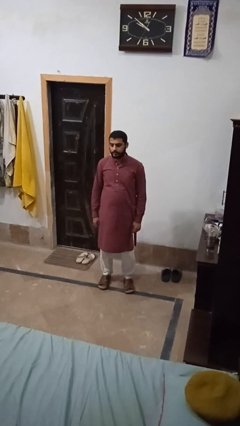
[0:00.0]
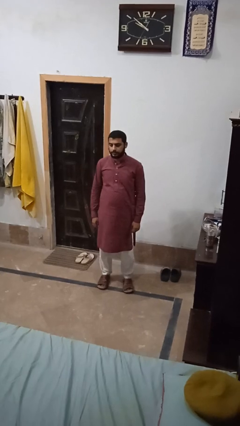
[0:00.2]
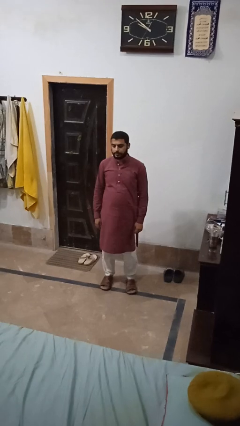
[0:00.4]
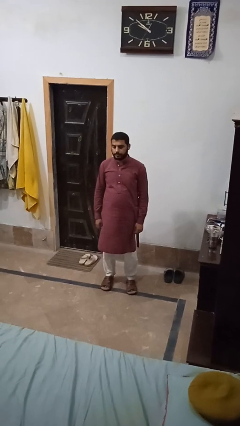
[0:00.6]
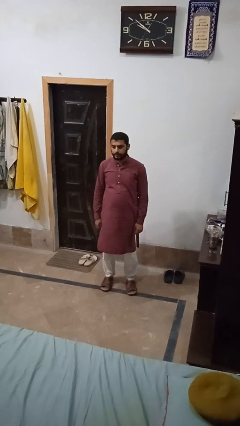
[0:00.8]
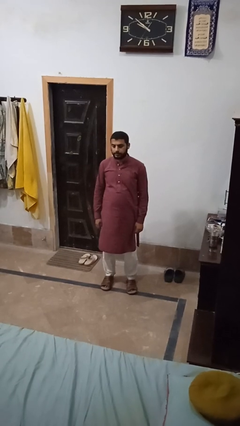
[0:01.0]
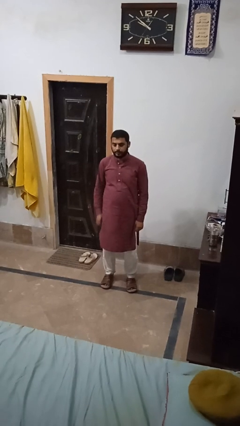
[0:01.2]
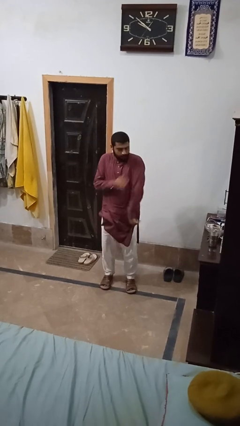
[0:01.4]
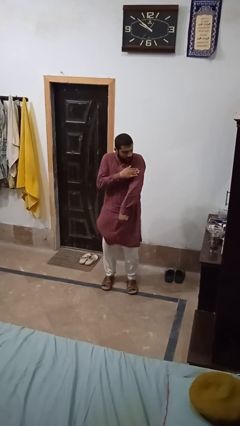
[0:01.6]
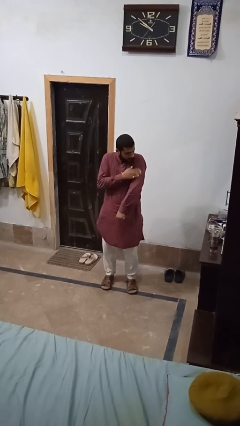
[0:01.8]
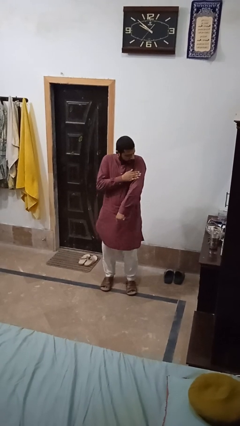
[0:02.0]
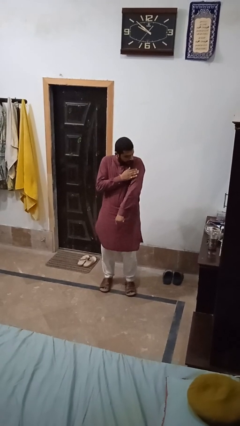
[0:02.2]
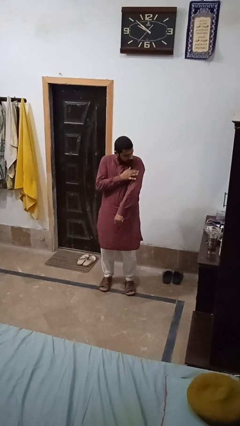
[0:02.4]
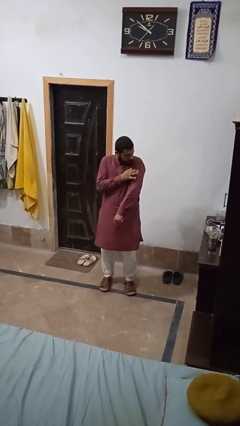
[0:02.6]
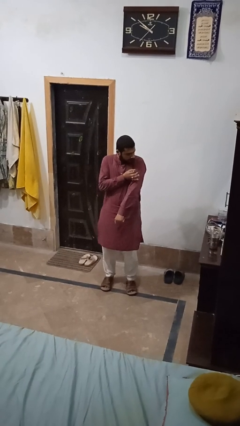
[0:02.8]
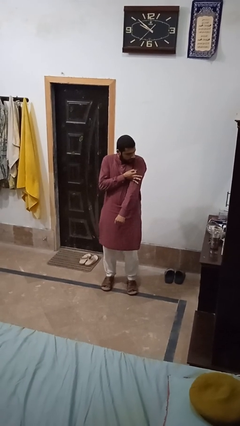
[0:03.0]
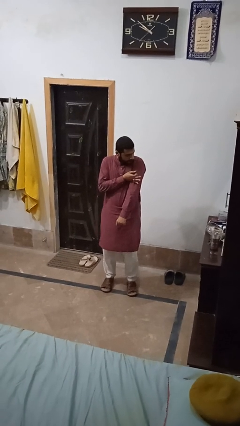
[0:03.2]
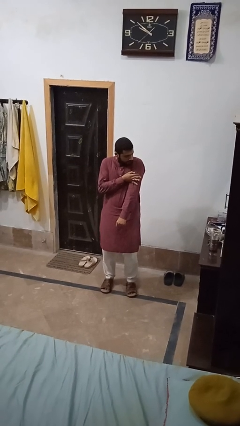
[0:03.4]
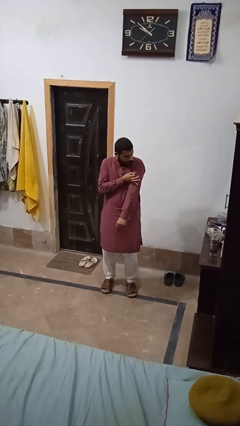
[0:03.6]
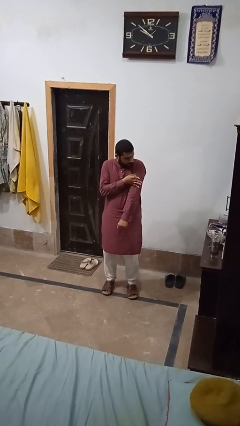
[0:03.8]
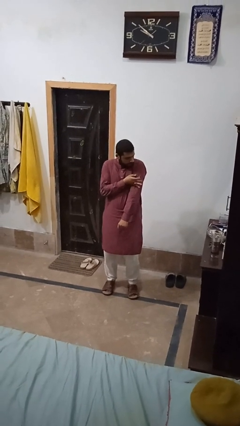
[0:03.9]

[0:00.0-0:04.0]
person swats bug

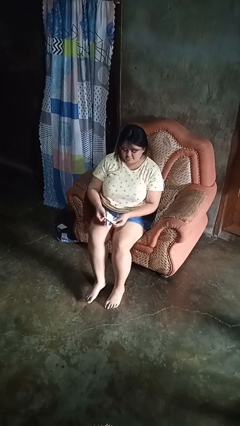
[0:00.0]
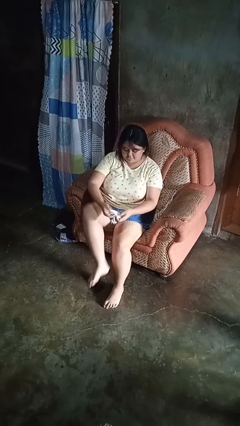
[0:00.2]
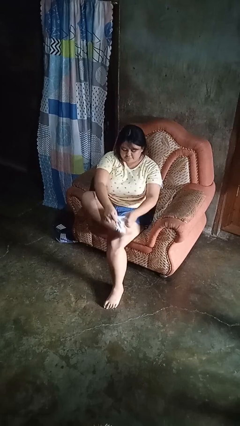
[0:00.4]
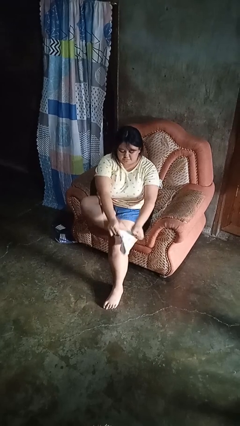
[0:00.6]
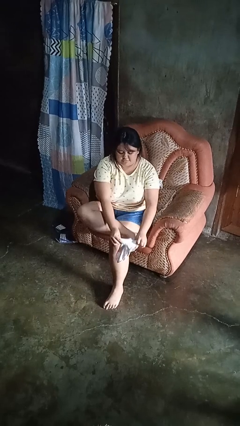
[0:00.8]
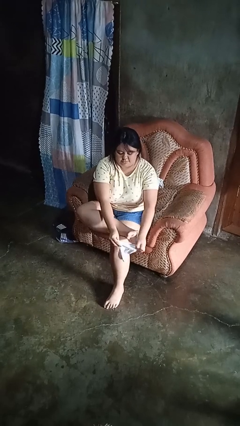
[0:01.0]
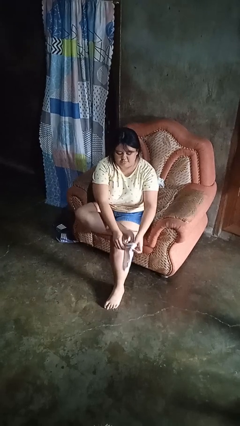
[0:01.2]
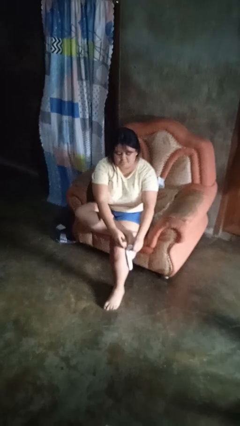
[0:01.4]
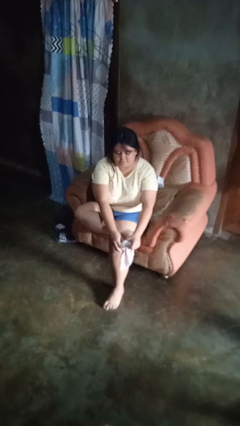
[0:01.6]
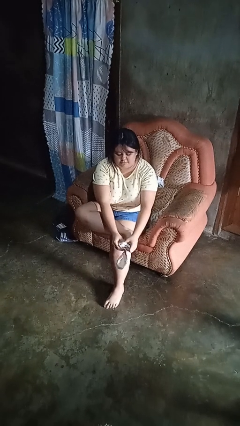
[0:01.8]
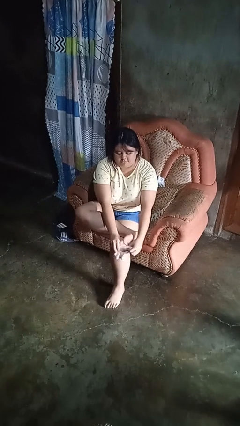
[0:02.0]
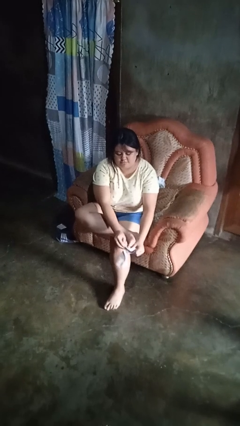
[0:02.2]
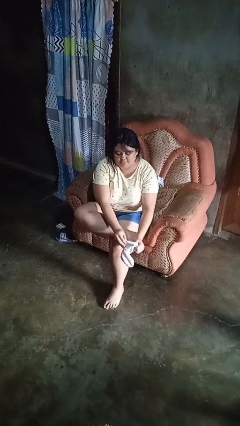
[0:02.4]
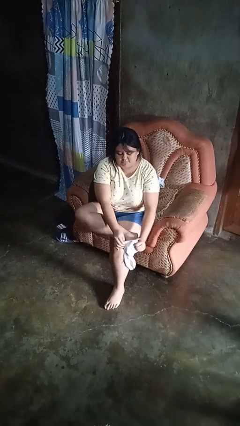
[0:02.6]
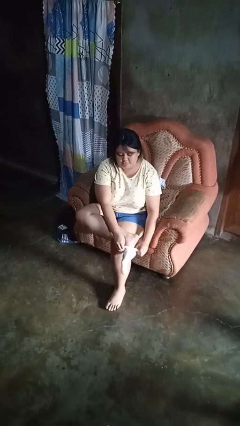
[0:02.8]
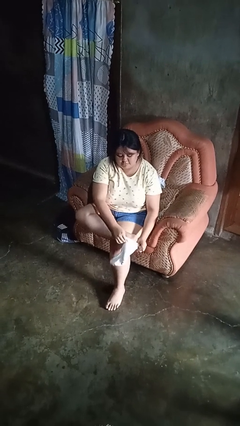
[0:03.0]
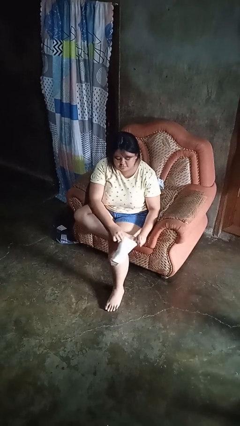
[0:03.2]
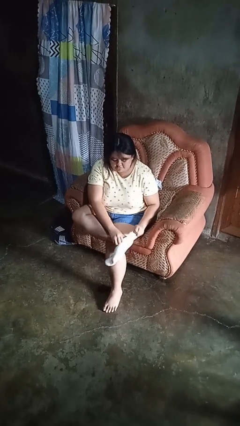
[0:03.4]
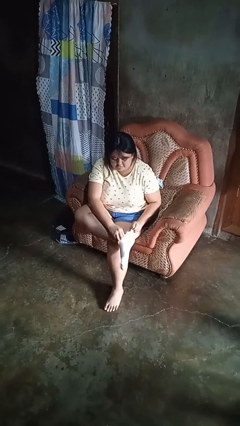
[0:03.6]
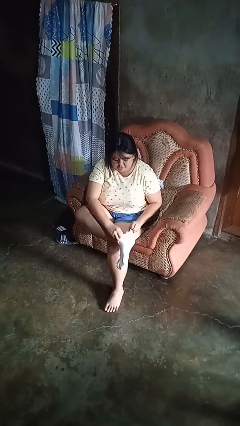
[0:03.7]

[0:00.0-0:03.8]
person puts on socks

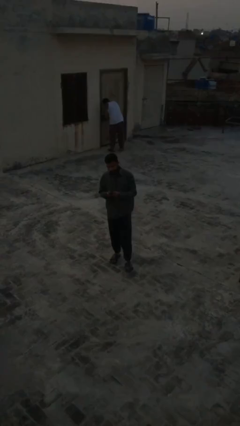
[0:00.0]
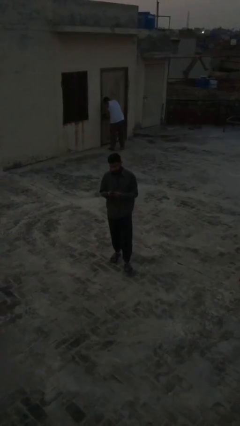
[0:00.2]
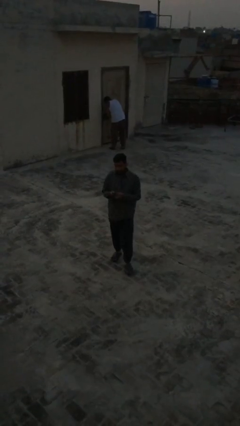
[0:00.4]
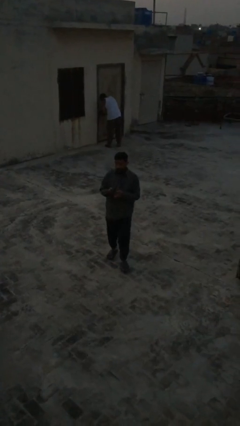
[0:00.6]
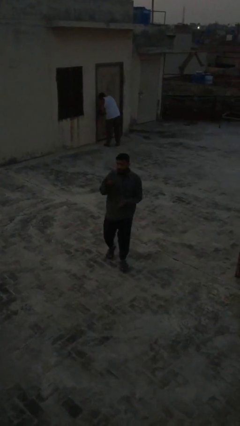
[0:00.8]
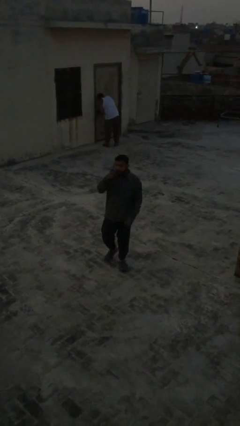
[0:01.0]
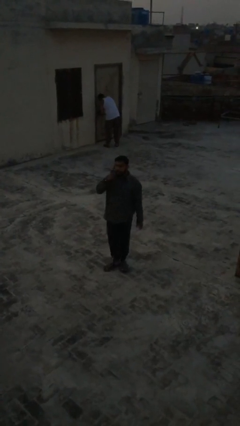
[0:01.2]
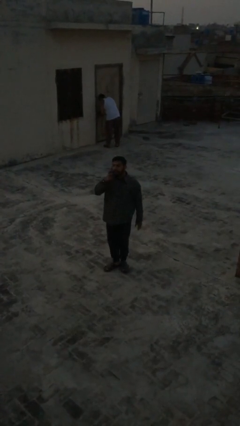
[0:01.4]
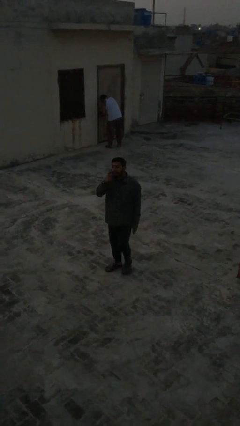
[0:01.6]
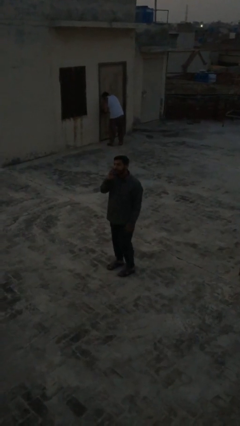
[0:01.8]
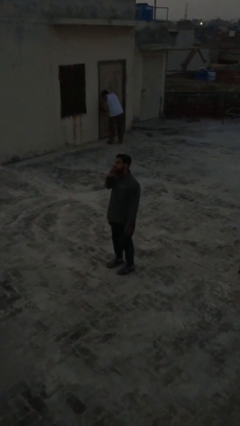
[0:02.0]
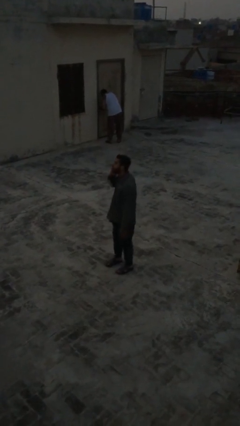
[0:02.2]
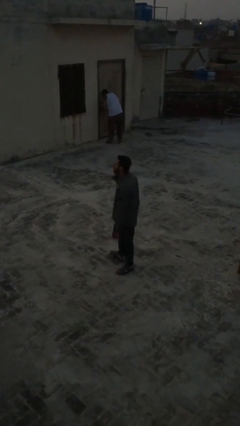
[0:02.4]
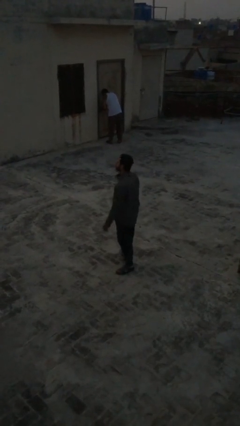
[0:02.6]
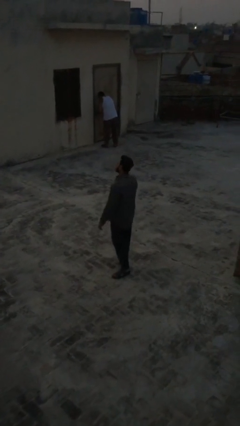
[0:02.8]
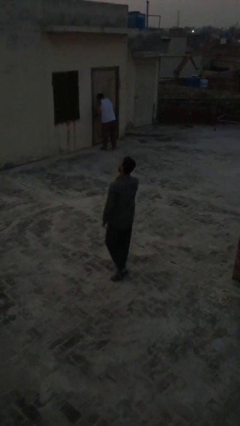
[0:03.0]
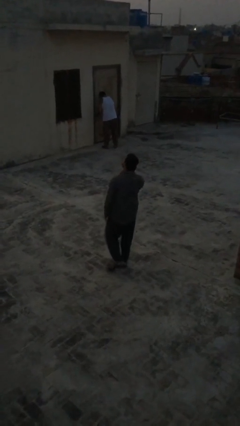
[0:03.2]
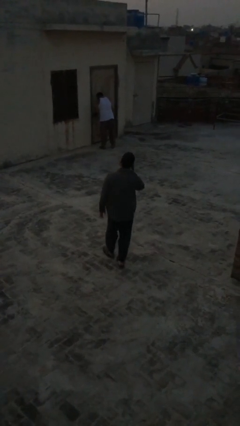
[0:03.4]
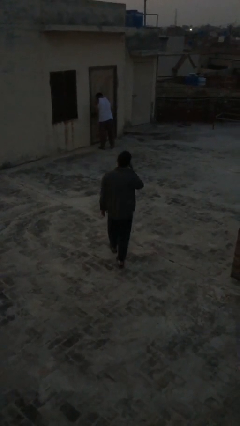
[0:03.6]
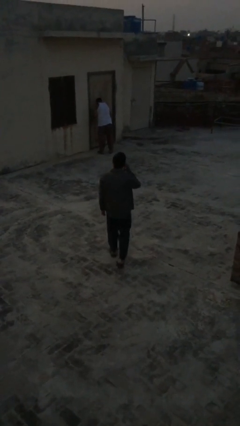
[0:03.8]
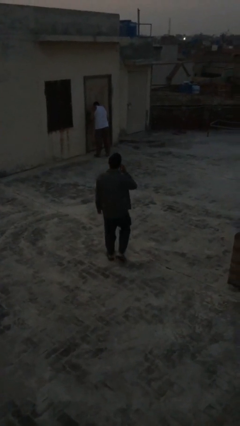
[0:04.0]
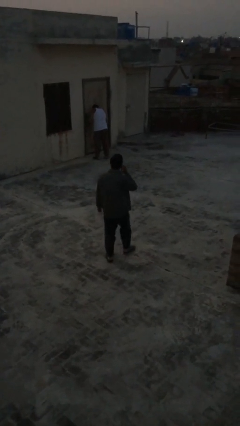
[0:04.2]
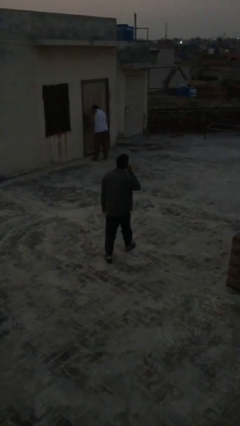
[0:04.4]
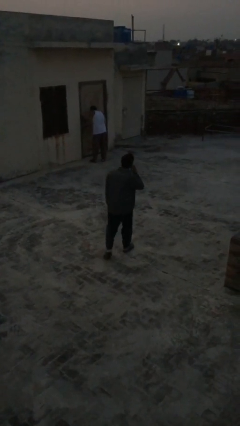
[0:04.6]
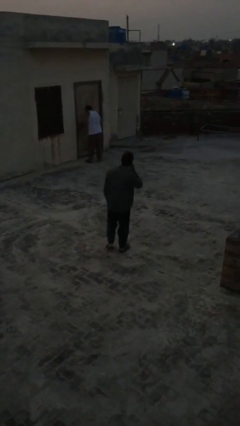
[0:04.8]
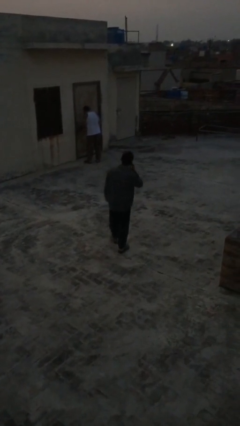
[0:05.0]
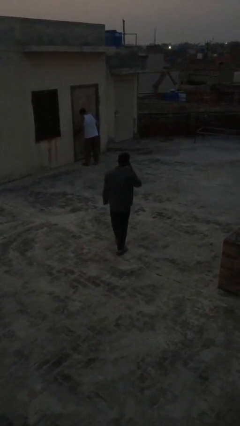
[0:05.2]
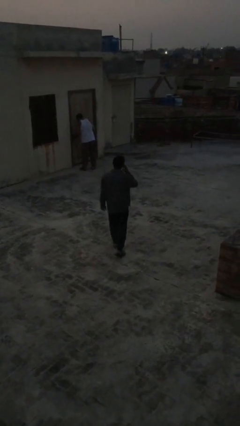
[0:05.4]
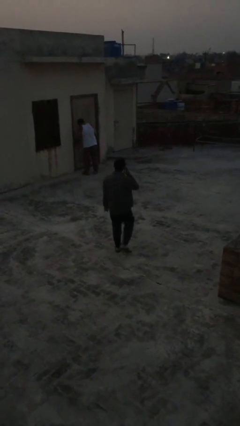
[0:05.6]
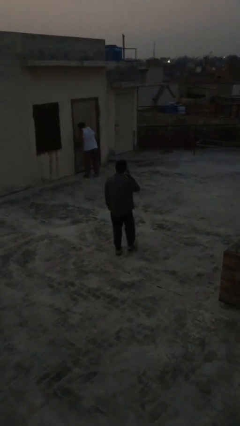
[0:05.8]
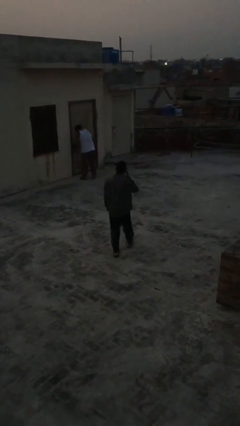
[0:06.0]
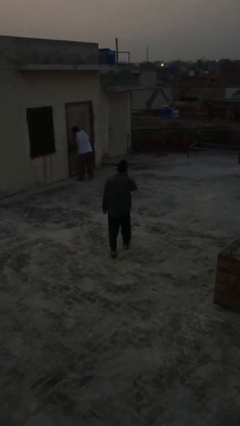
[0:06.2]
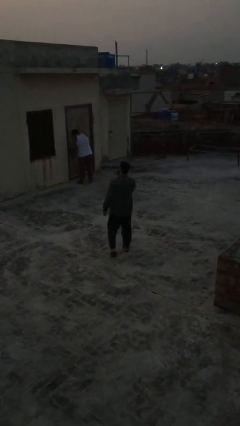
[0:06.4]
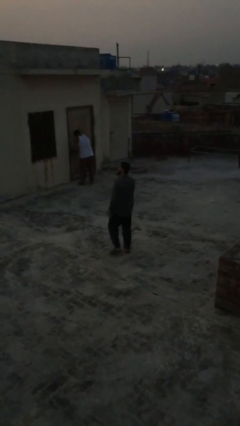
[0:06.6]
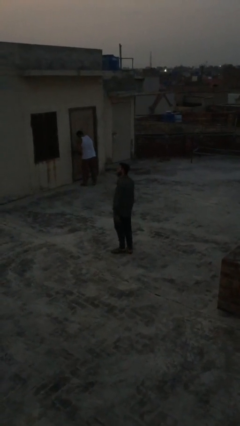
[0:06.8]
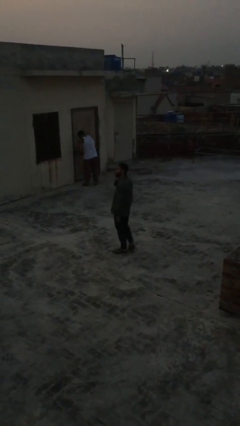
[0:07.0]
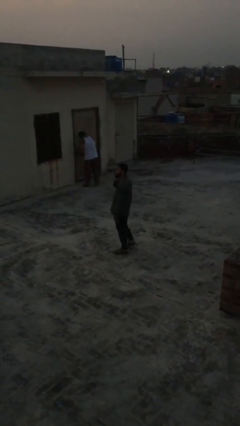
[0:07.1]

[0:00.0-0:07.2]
person talks on phone

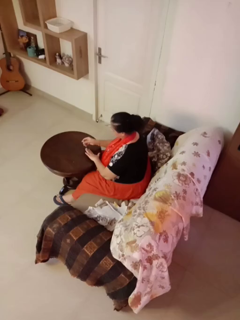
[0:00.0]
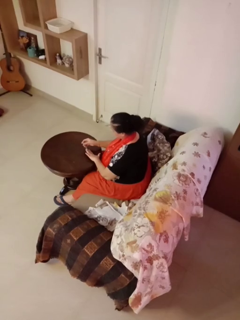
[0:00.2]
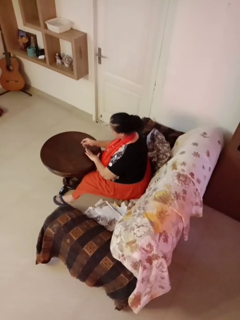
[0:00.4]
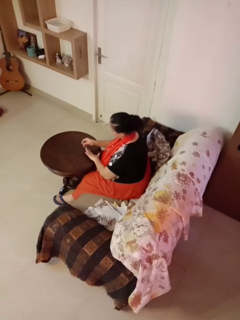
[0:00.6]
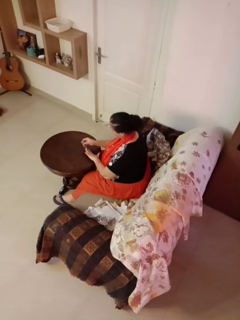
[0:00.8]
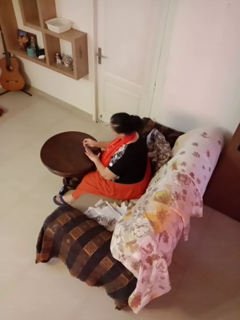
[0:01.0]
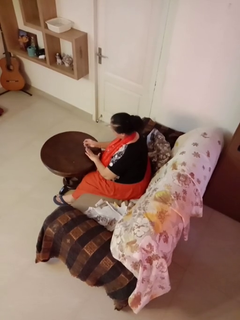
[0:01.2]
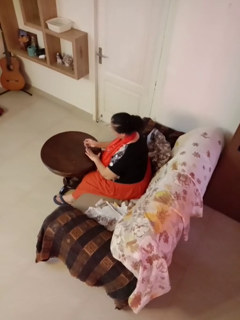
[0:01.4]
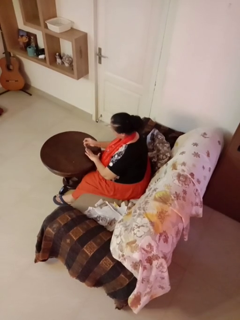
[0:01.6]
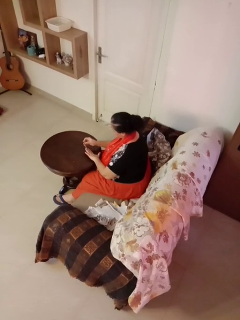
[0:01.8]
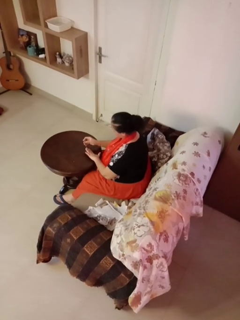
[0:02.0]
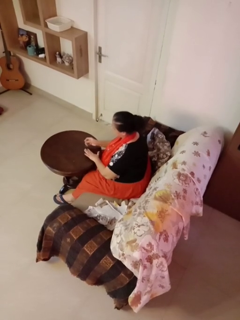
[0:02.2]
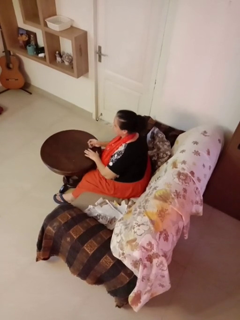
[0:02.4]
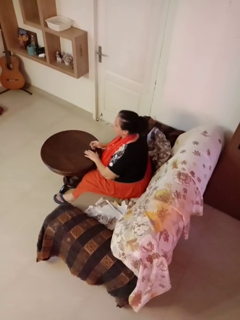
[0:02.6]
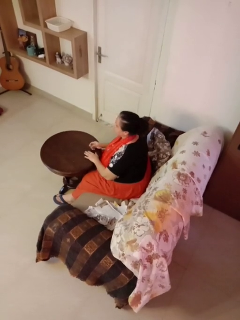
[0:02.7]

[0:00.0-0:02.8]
person clips fingernails

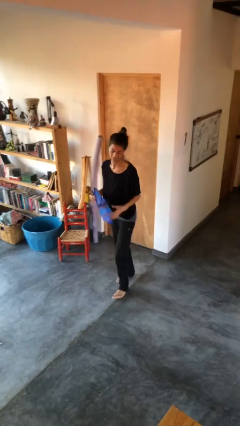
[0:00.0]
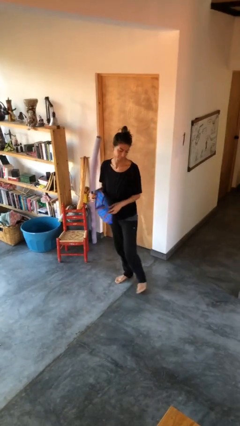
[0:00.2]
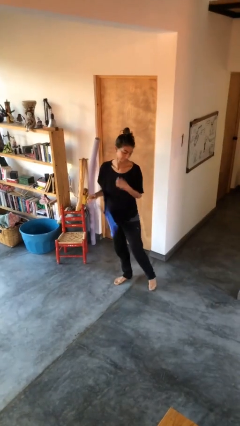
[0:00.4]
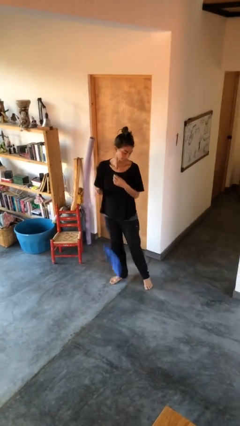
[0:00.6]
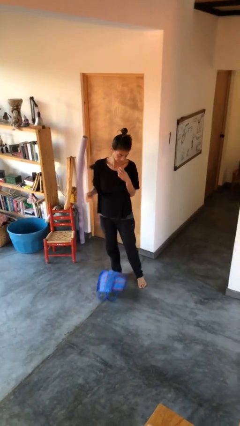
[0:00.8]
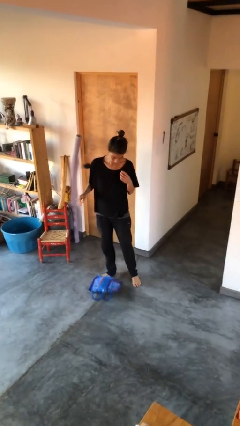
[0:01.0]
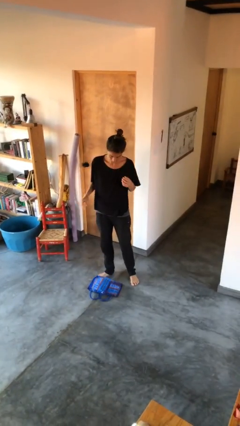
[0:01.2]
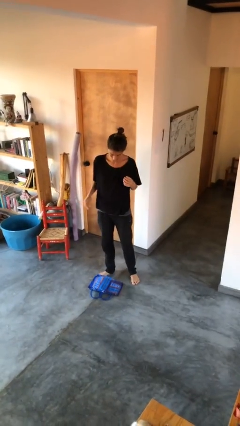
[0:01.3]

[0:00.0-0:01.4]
person drops object
